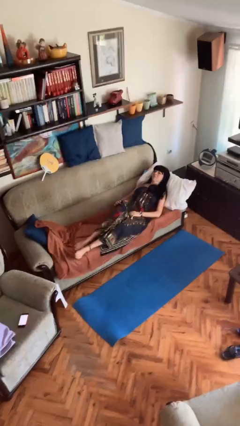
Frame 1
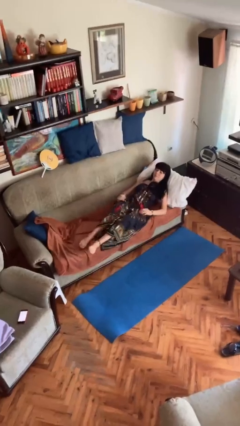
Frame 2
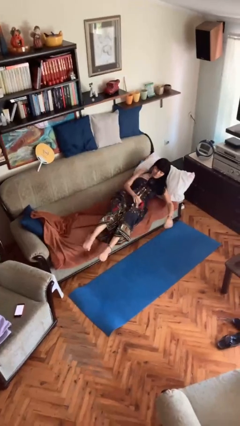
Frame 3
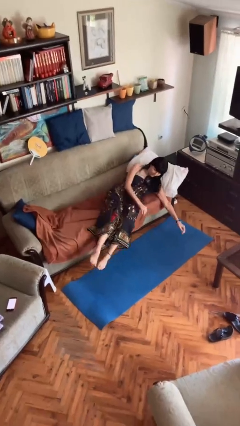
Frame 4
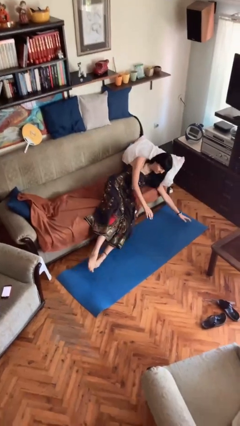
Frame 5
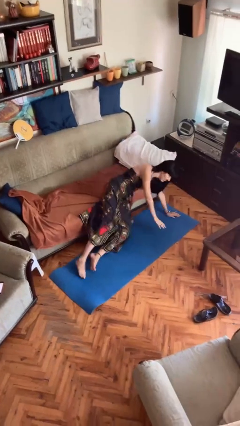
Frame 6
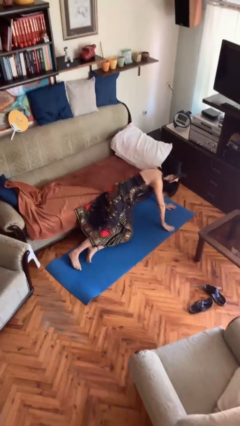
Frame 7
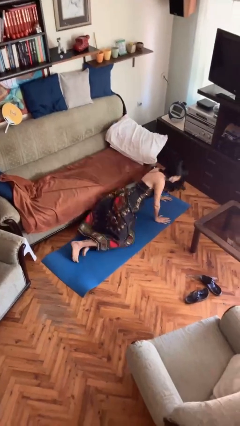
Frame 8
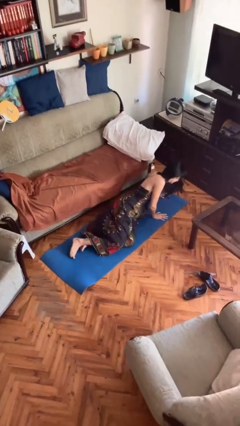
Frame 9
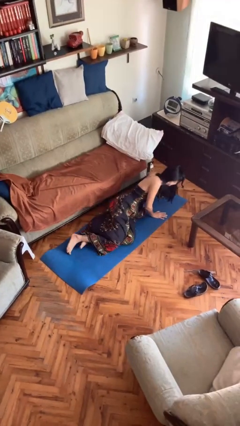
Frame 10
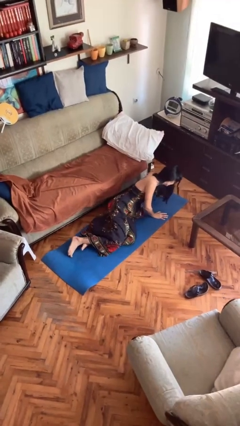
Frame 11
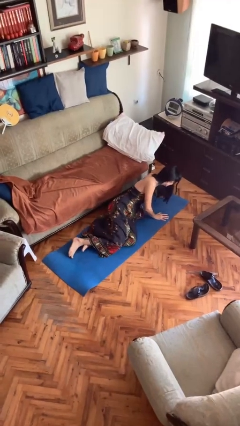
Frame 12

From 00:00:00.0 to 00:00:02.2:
person falls from bed

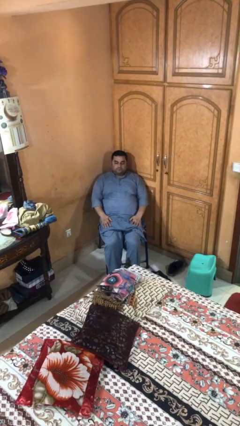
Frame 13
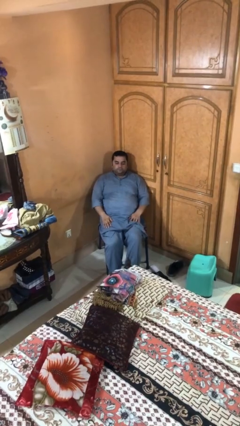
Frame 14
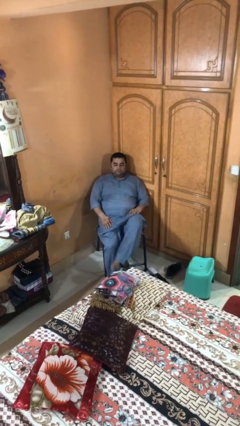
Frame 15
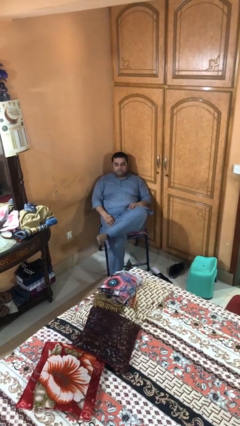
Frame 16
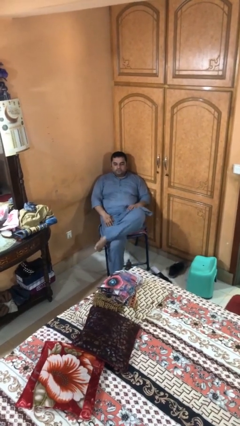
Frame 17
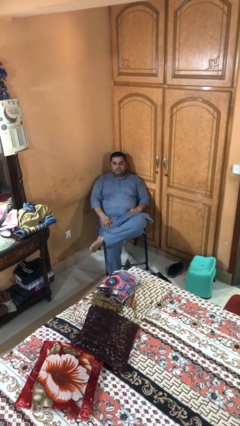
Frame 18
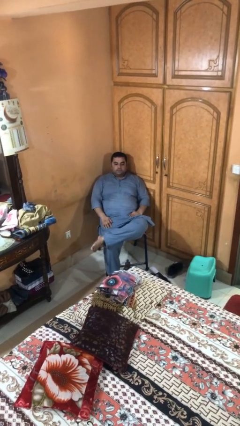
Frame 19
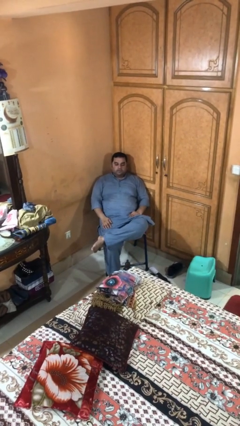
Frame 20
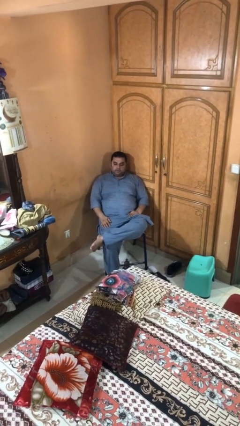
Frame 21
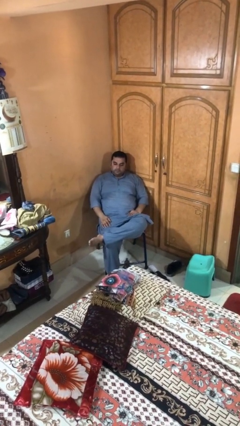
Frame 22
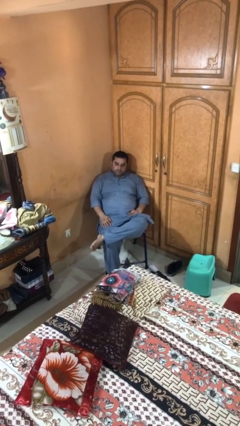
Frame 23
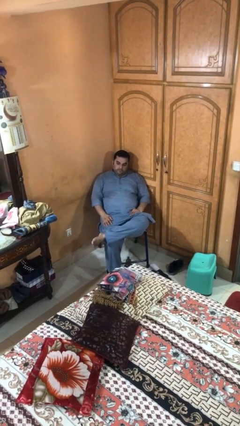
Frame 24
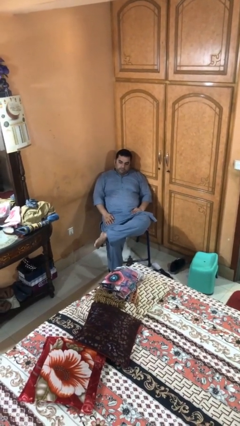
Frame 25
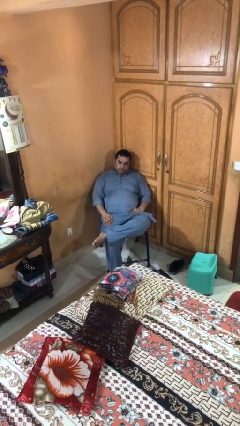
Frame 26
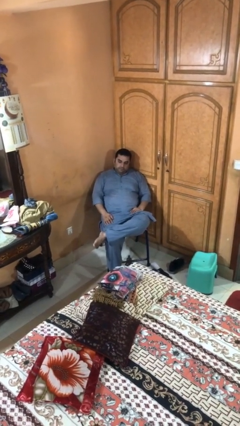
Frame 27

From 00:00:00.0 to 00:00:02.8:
person crosses legs

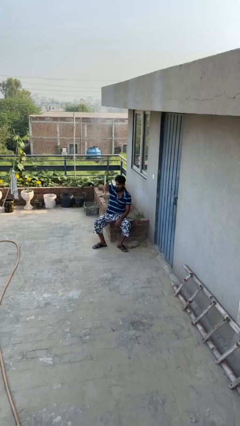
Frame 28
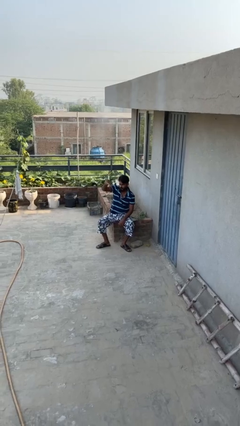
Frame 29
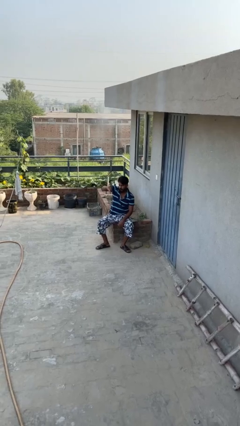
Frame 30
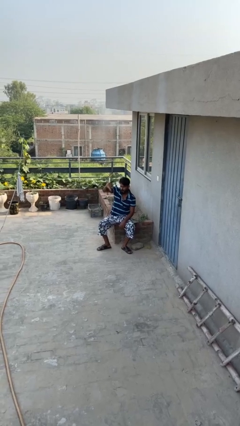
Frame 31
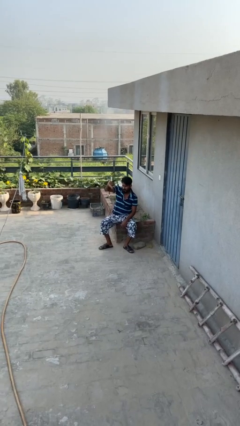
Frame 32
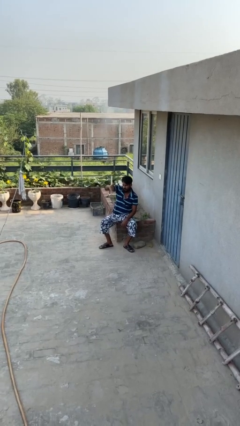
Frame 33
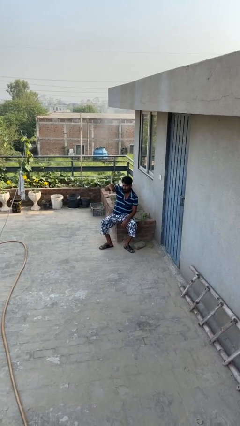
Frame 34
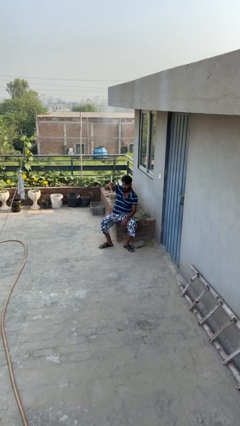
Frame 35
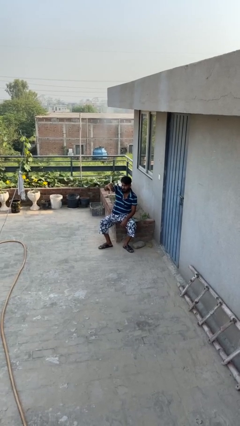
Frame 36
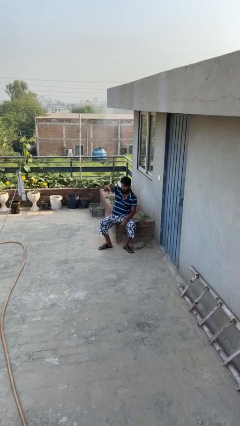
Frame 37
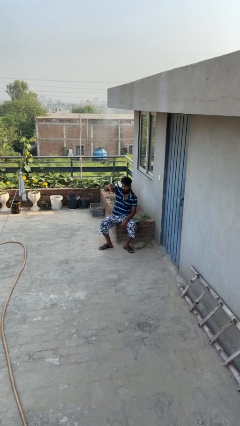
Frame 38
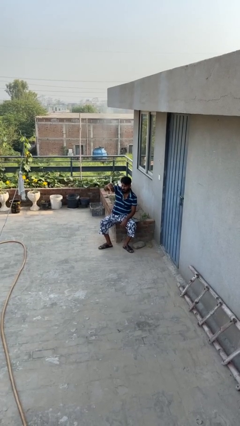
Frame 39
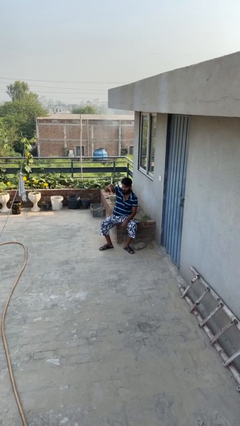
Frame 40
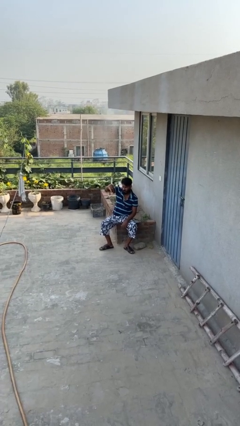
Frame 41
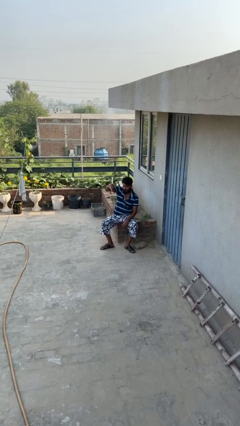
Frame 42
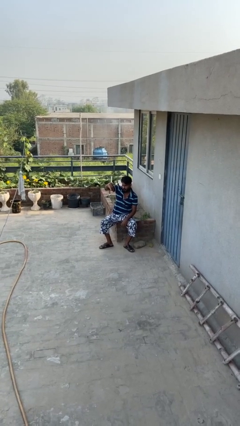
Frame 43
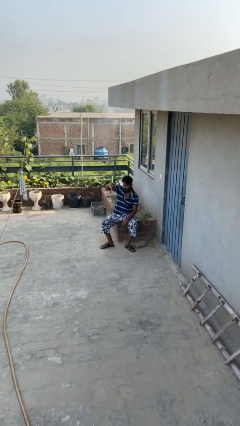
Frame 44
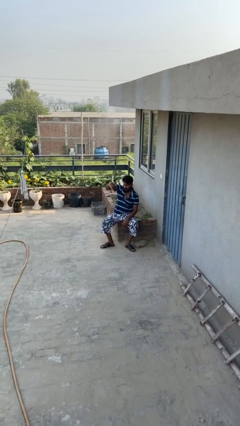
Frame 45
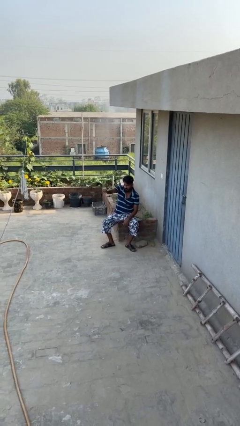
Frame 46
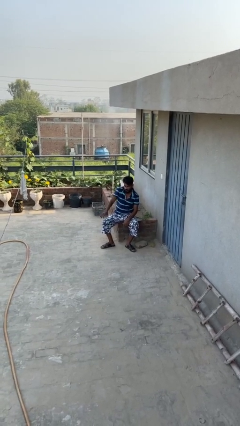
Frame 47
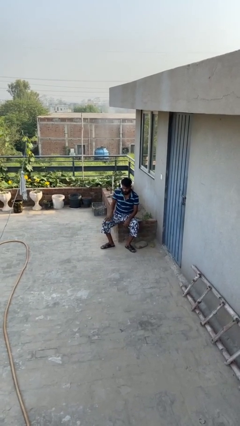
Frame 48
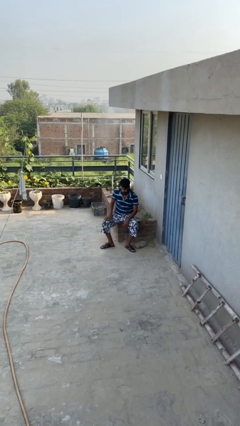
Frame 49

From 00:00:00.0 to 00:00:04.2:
person gestures thumbs down

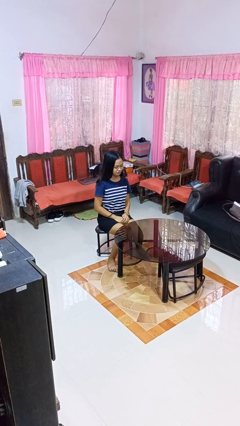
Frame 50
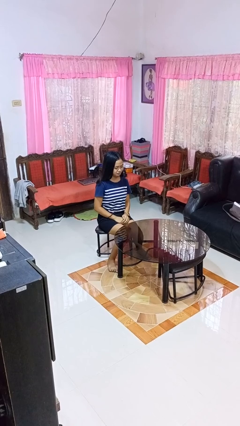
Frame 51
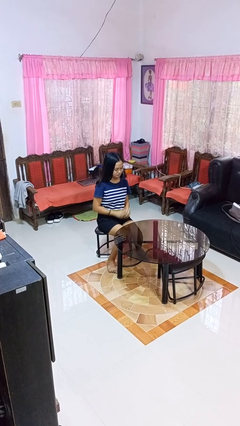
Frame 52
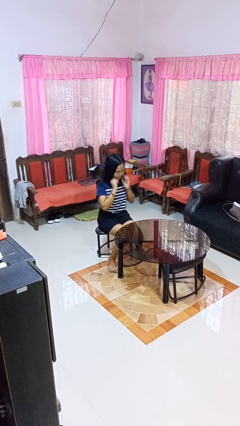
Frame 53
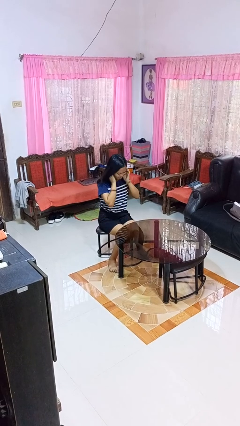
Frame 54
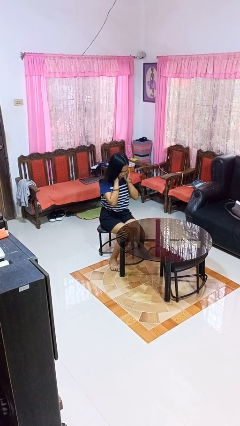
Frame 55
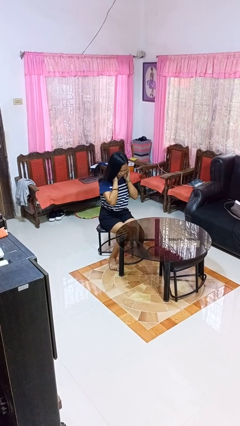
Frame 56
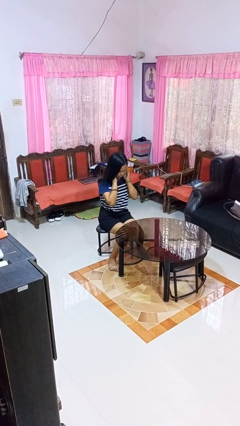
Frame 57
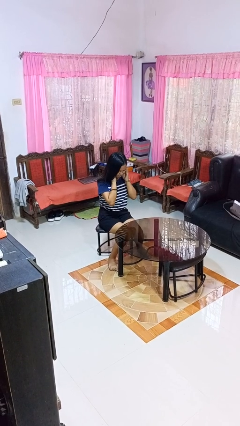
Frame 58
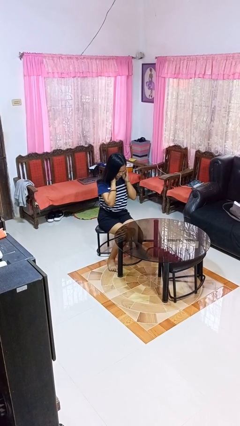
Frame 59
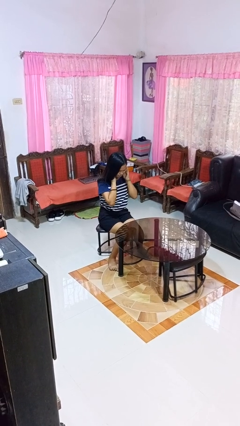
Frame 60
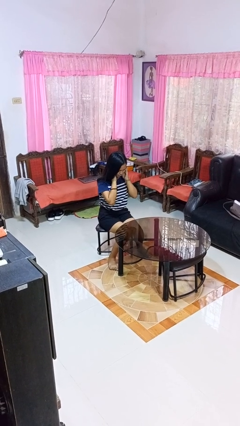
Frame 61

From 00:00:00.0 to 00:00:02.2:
person puts fingers in ear

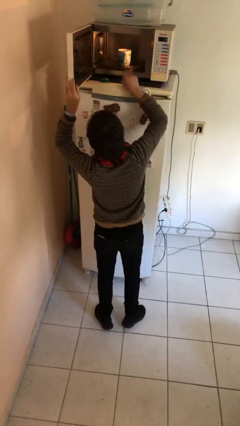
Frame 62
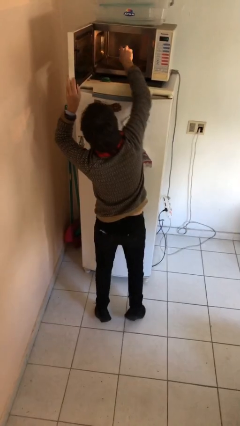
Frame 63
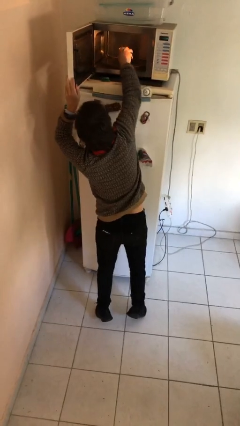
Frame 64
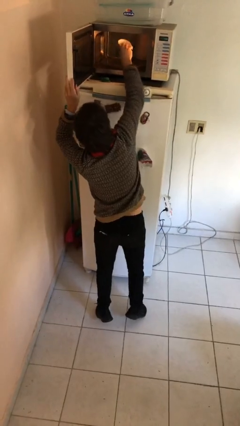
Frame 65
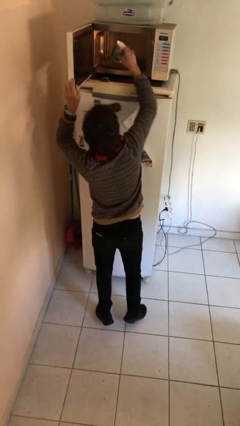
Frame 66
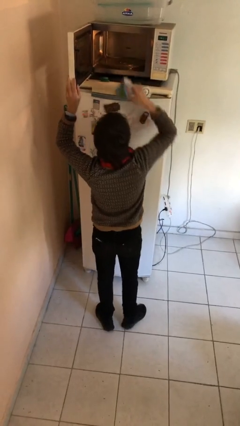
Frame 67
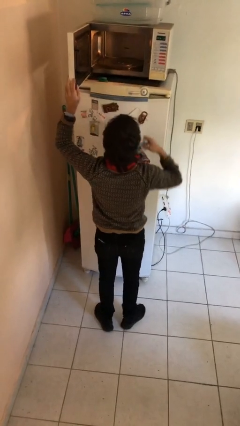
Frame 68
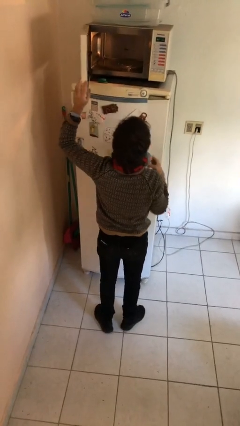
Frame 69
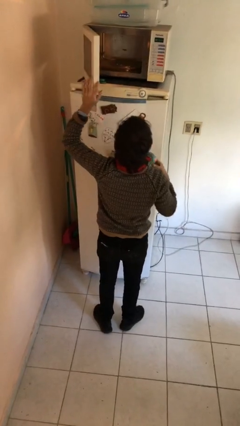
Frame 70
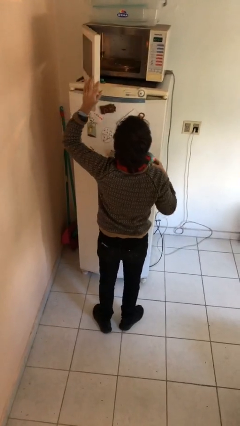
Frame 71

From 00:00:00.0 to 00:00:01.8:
person takes object from microwave

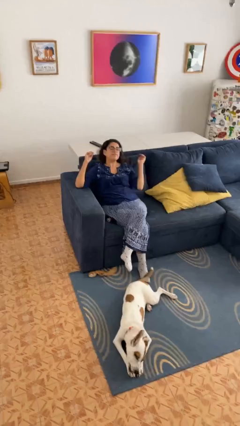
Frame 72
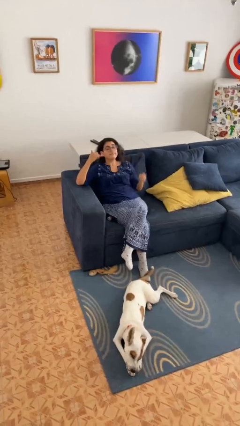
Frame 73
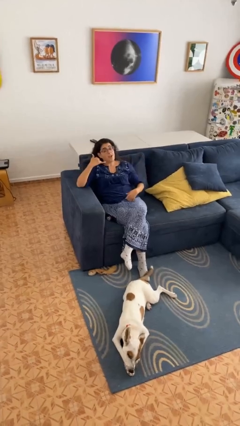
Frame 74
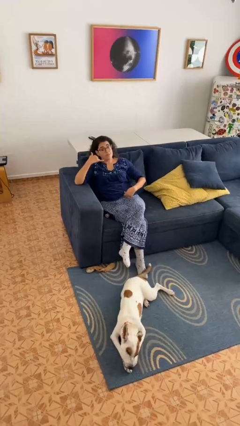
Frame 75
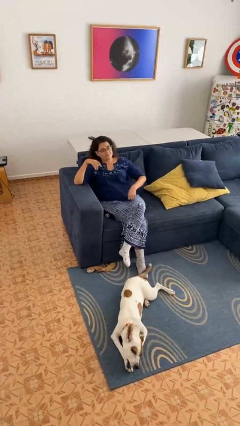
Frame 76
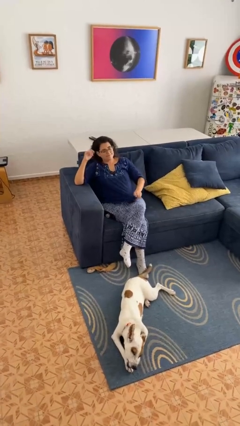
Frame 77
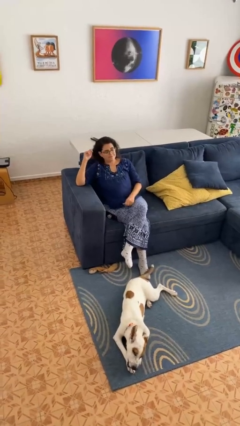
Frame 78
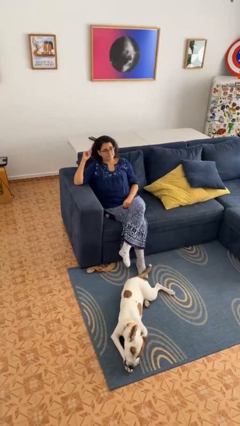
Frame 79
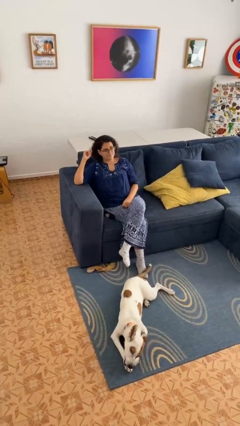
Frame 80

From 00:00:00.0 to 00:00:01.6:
person gestures call me

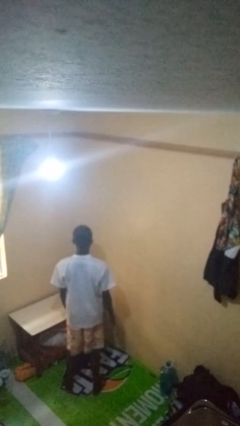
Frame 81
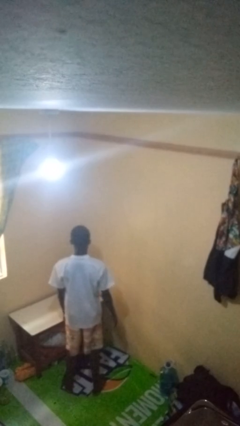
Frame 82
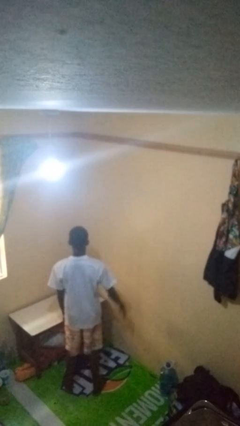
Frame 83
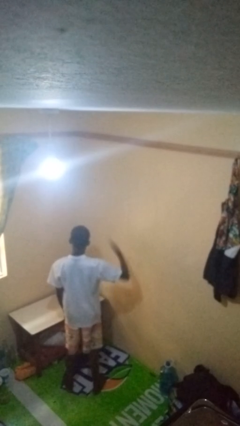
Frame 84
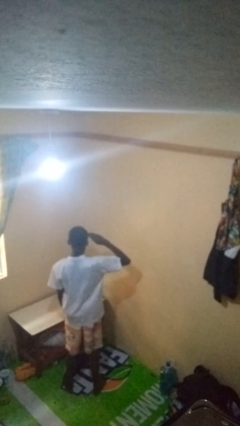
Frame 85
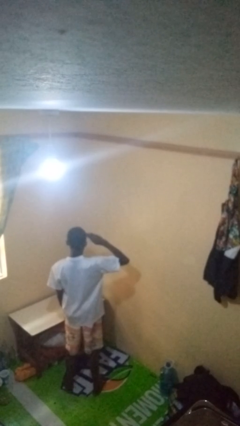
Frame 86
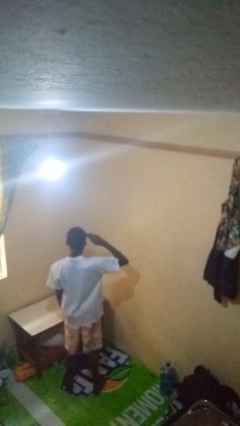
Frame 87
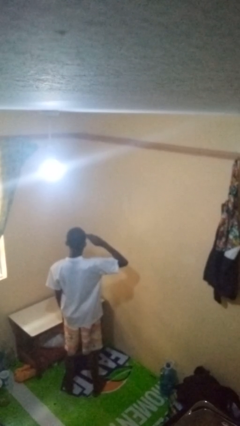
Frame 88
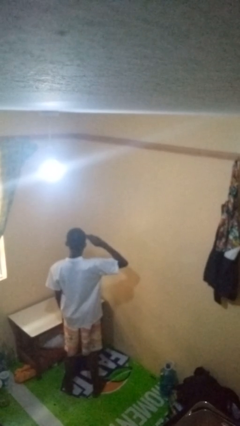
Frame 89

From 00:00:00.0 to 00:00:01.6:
person salutes

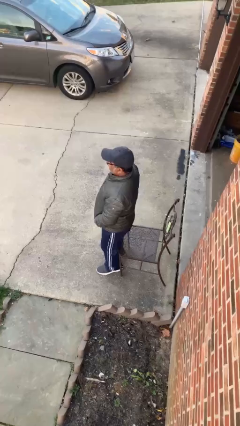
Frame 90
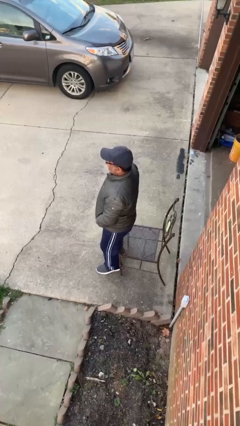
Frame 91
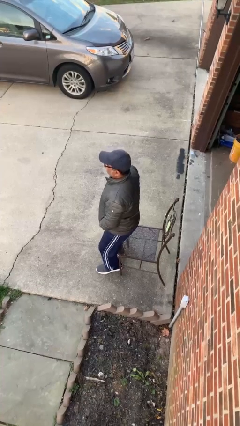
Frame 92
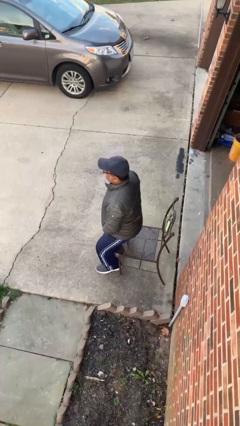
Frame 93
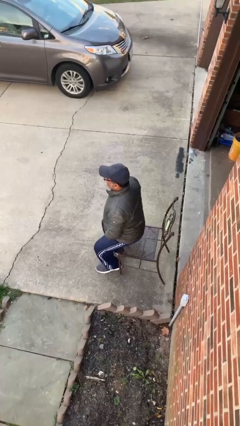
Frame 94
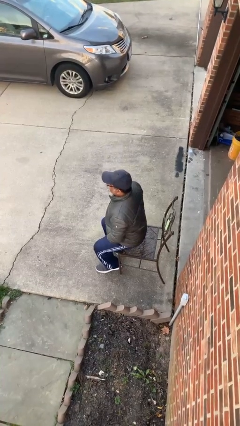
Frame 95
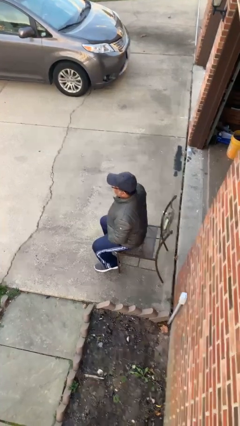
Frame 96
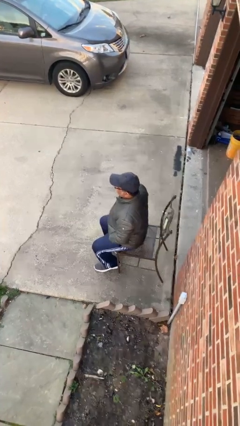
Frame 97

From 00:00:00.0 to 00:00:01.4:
person sits down
